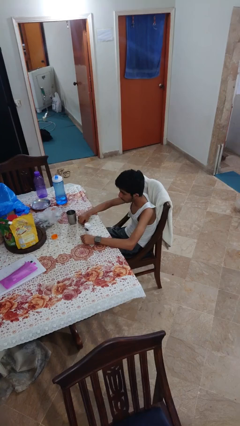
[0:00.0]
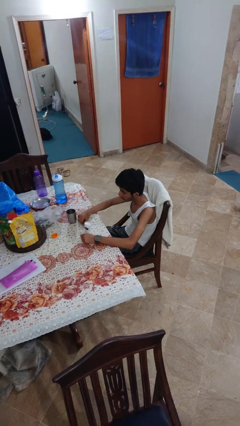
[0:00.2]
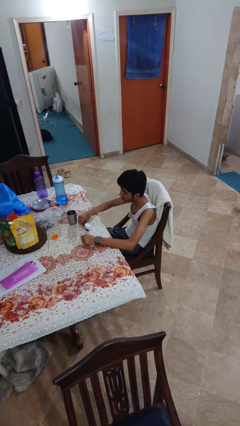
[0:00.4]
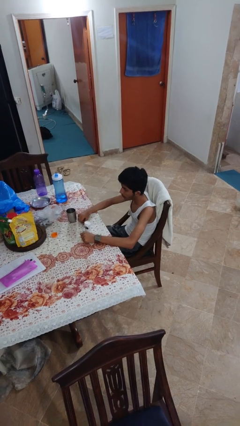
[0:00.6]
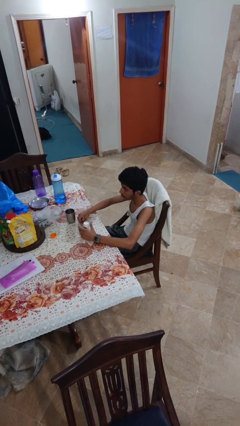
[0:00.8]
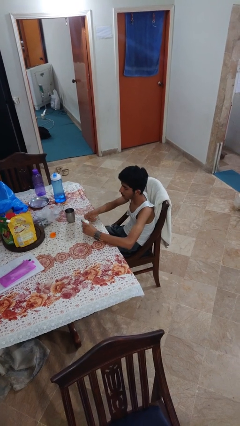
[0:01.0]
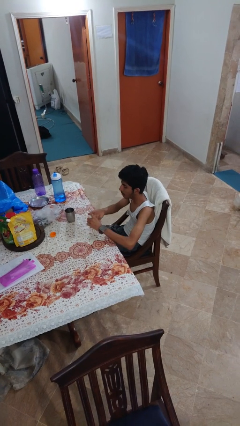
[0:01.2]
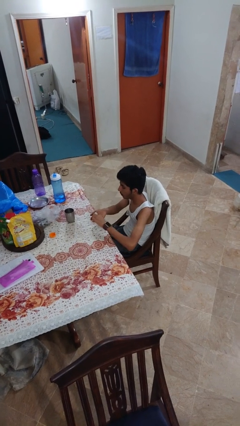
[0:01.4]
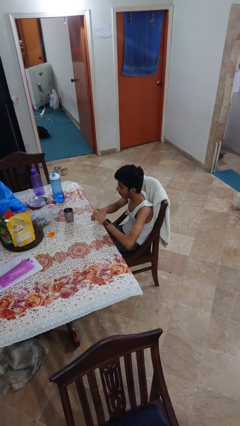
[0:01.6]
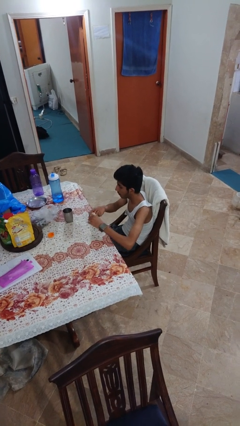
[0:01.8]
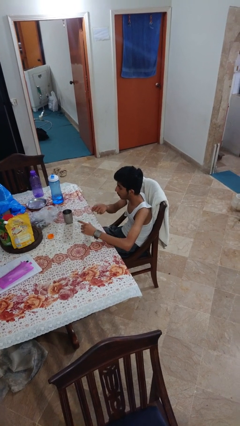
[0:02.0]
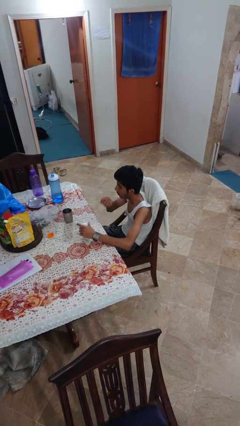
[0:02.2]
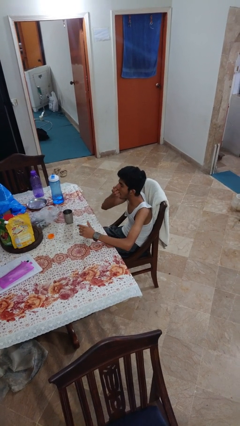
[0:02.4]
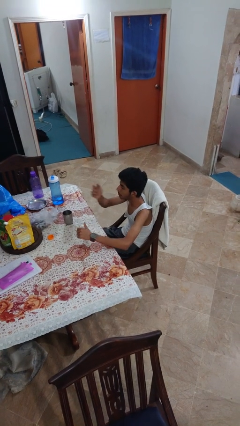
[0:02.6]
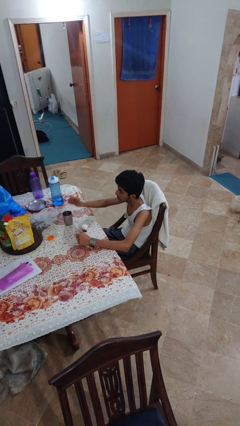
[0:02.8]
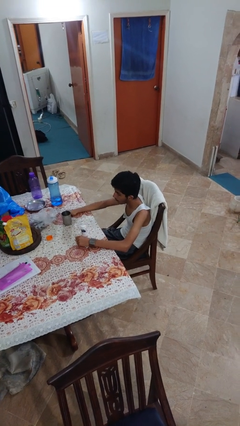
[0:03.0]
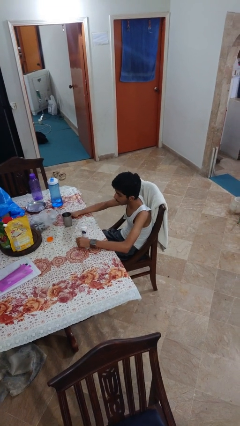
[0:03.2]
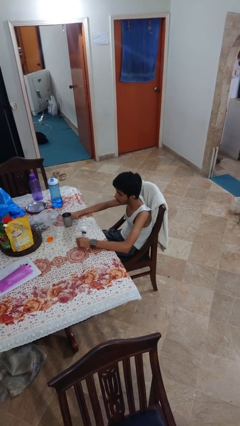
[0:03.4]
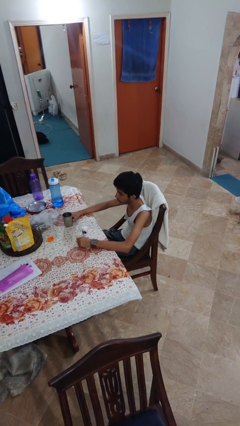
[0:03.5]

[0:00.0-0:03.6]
person takes medicine pills

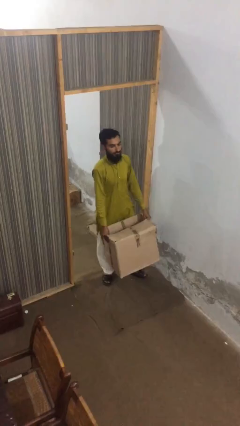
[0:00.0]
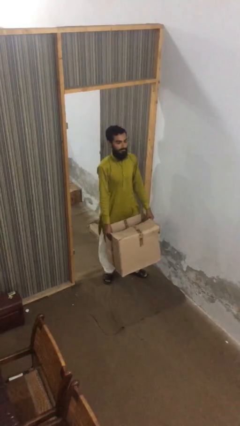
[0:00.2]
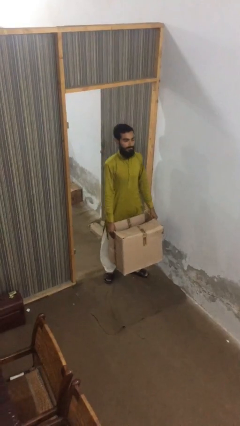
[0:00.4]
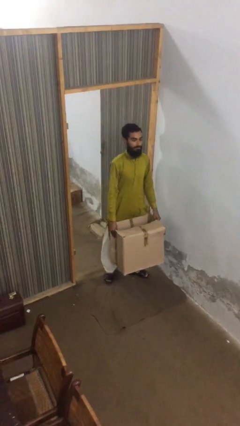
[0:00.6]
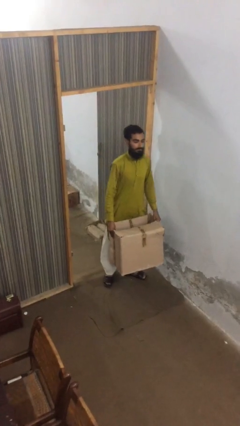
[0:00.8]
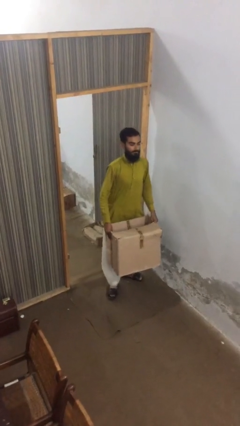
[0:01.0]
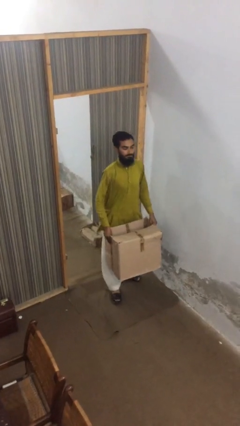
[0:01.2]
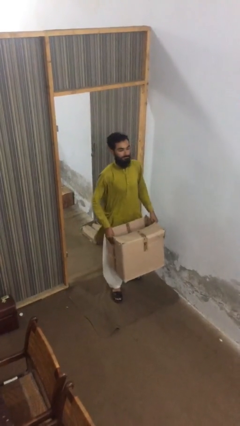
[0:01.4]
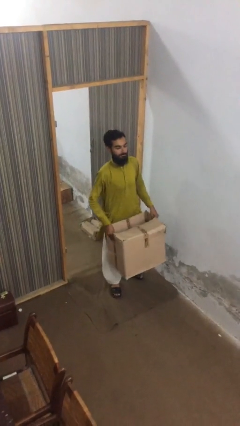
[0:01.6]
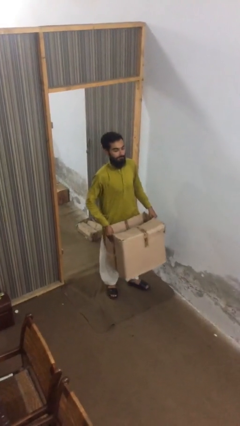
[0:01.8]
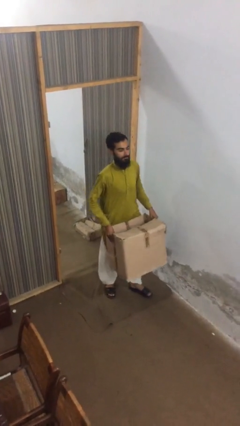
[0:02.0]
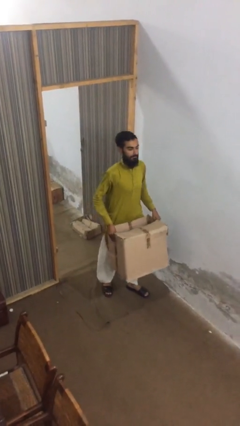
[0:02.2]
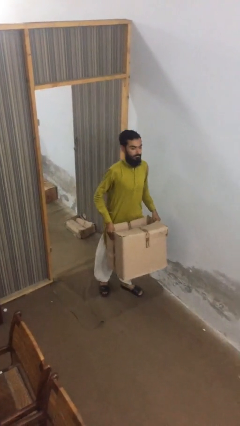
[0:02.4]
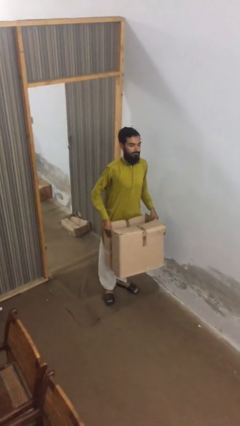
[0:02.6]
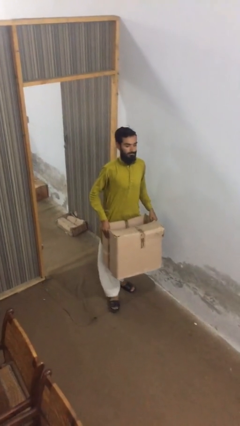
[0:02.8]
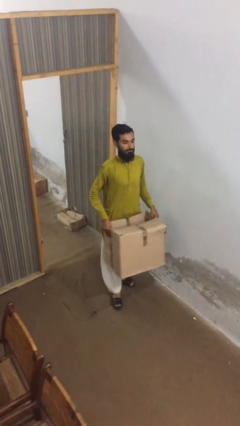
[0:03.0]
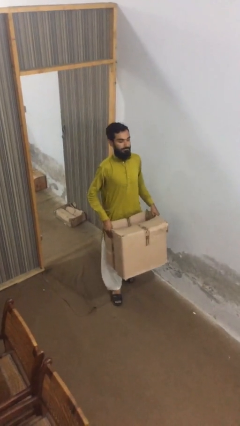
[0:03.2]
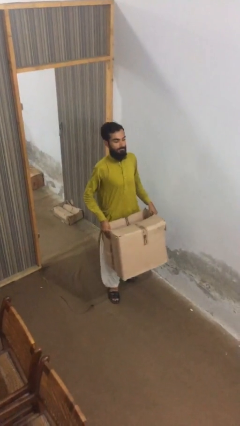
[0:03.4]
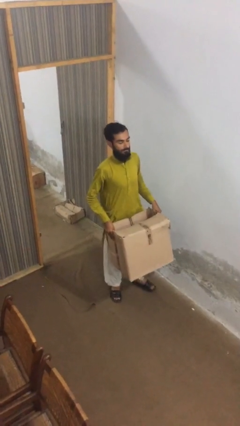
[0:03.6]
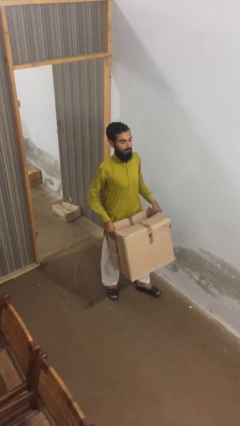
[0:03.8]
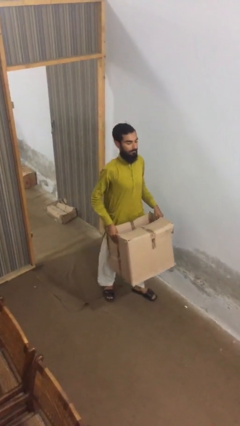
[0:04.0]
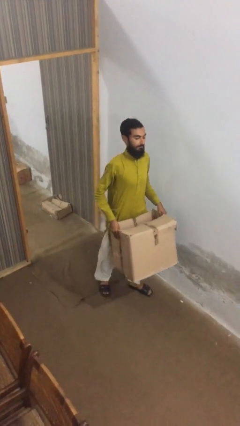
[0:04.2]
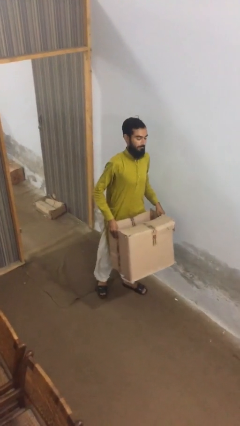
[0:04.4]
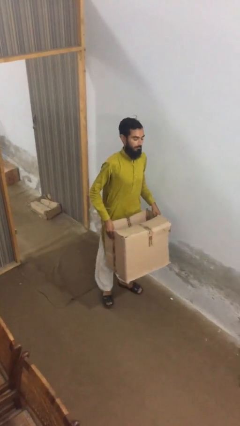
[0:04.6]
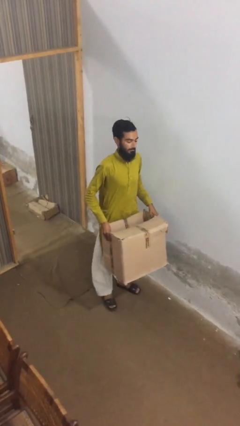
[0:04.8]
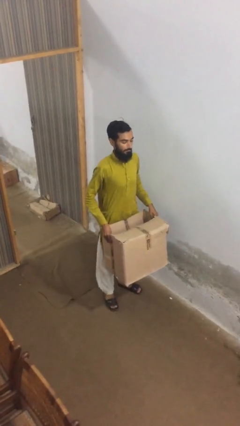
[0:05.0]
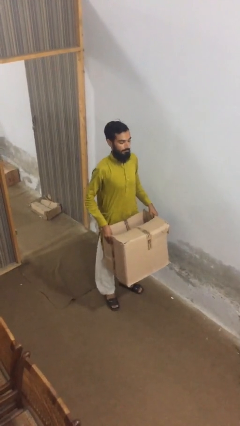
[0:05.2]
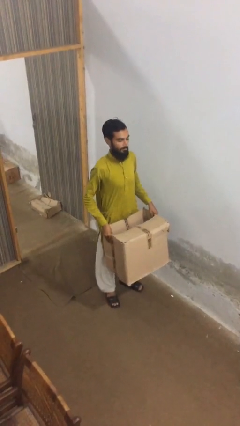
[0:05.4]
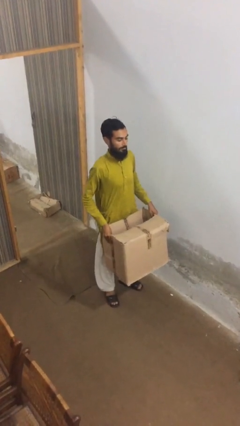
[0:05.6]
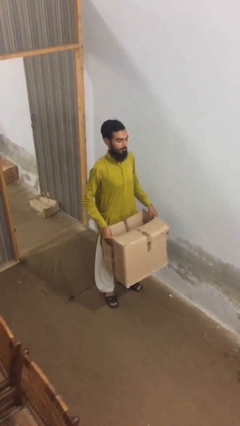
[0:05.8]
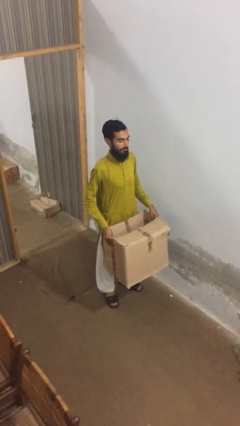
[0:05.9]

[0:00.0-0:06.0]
person carries heavy object

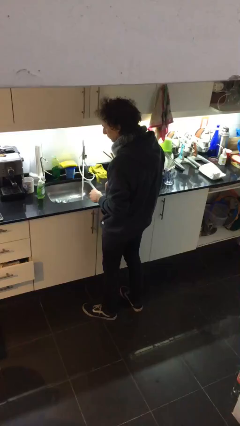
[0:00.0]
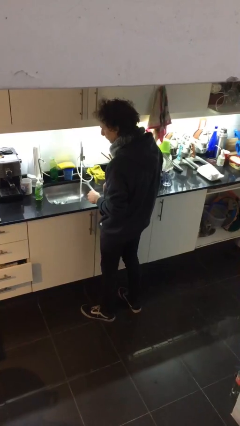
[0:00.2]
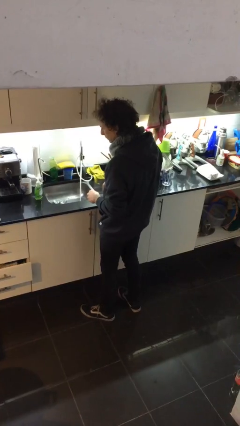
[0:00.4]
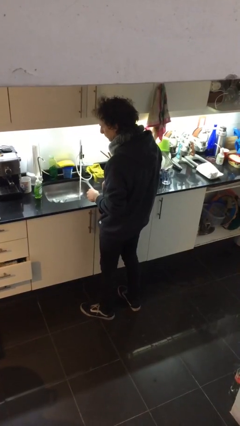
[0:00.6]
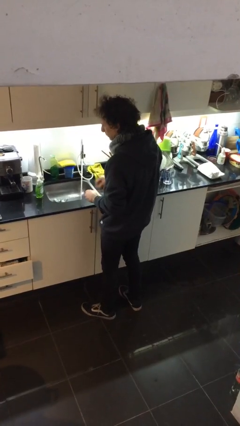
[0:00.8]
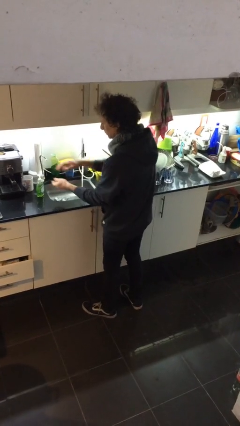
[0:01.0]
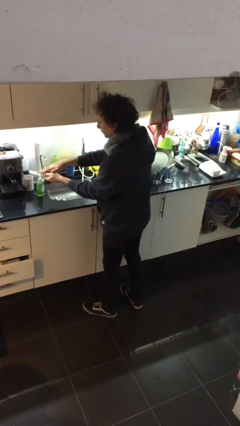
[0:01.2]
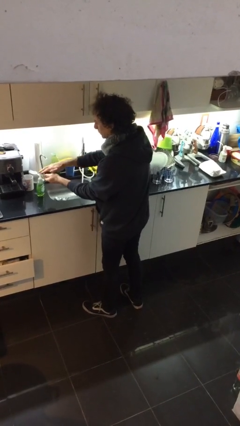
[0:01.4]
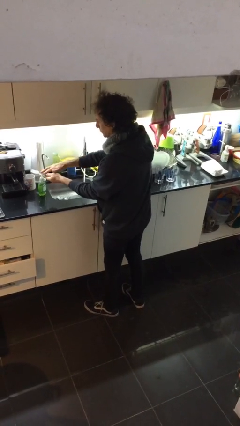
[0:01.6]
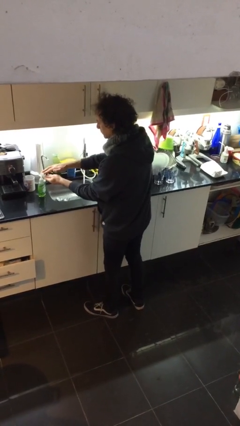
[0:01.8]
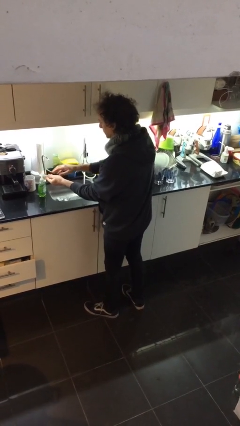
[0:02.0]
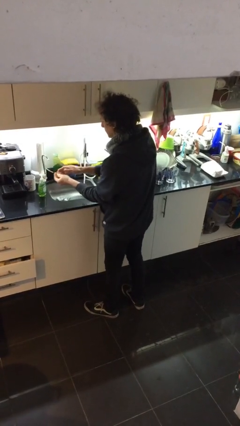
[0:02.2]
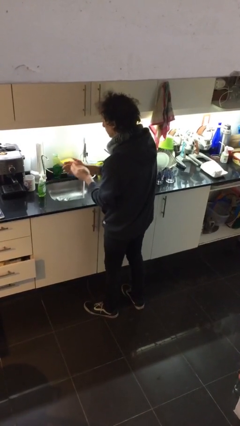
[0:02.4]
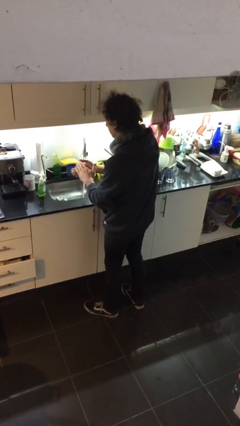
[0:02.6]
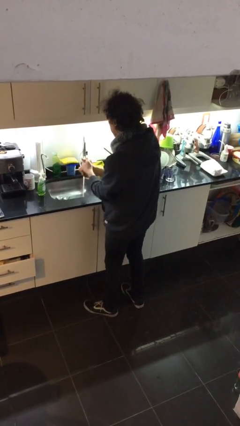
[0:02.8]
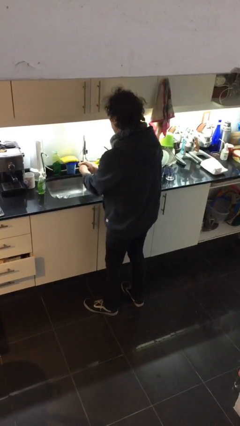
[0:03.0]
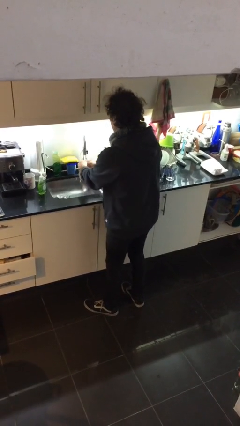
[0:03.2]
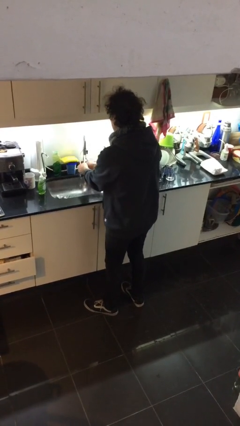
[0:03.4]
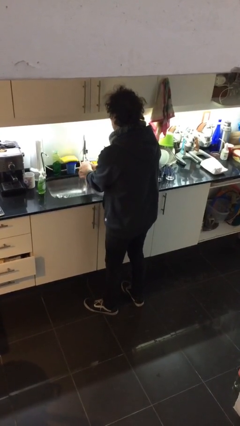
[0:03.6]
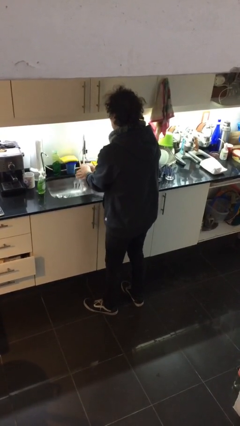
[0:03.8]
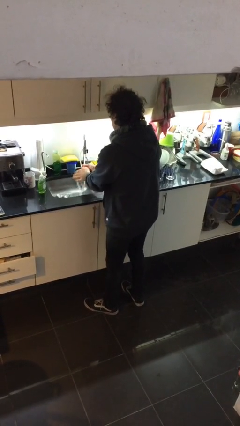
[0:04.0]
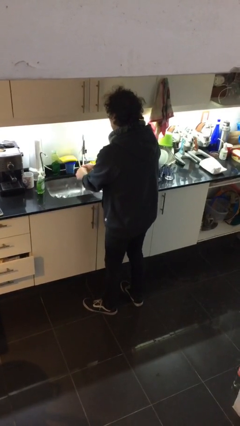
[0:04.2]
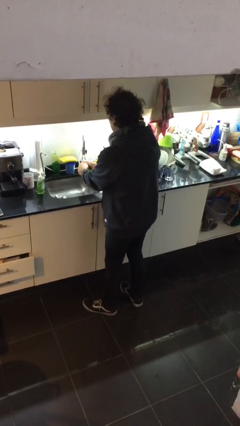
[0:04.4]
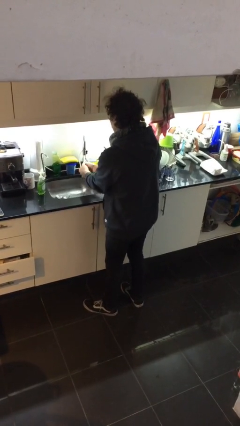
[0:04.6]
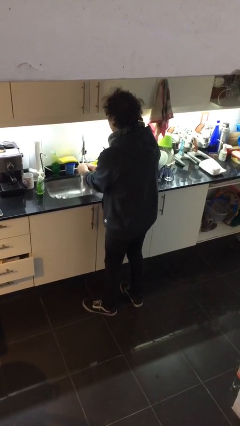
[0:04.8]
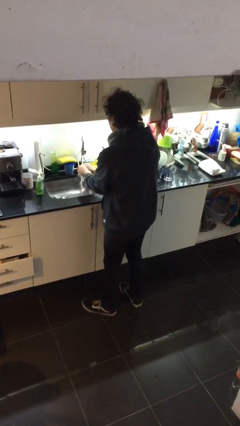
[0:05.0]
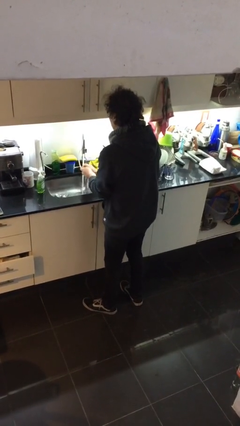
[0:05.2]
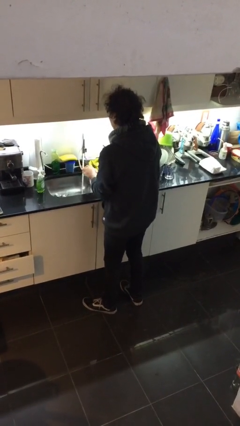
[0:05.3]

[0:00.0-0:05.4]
person washes hands

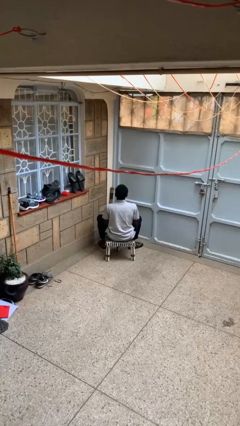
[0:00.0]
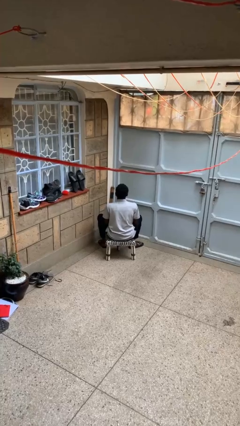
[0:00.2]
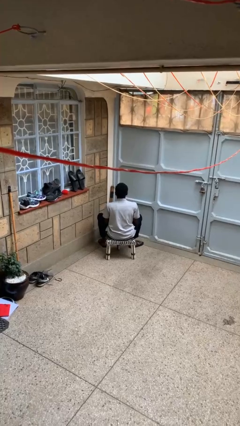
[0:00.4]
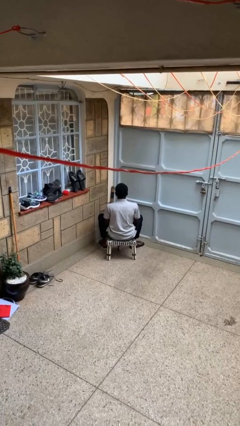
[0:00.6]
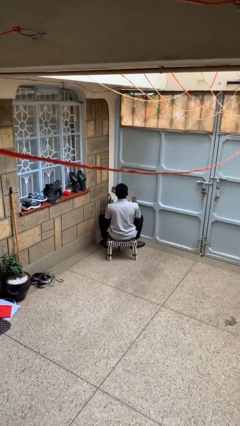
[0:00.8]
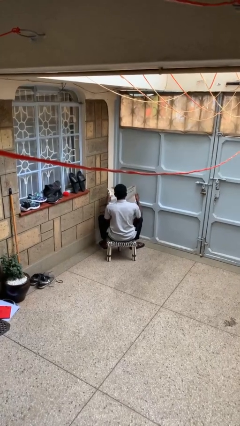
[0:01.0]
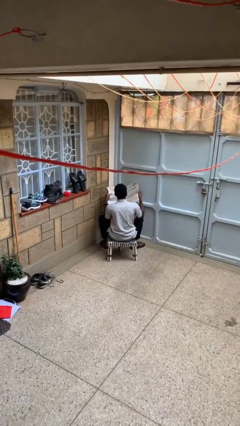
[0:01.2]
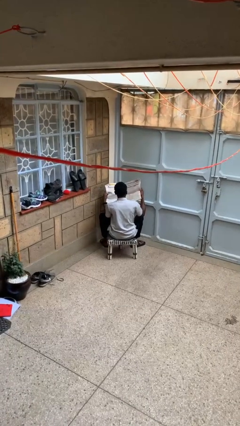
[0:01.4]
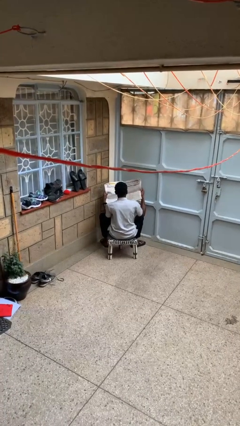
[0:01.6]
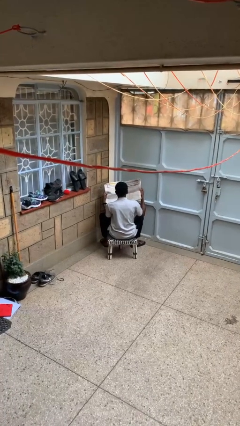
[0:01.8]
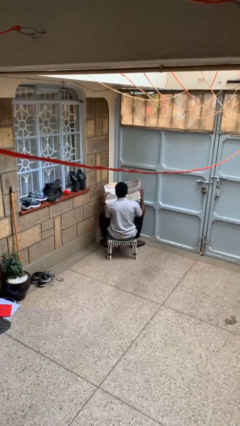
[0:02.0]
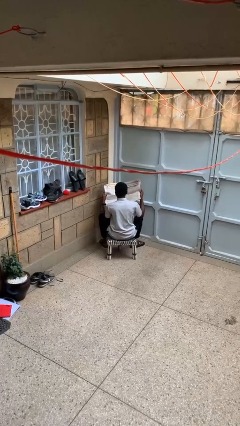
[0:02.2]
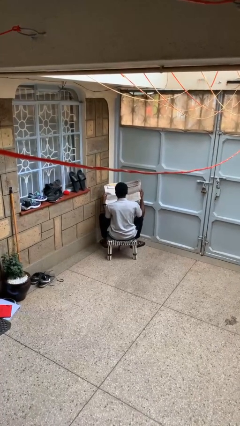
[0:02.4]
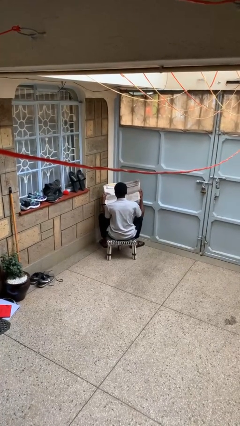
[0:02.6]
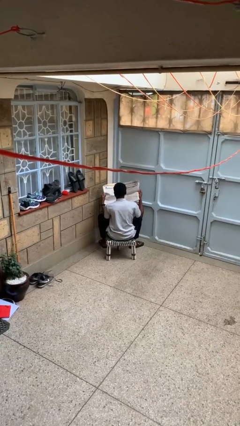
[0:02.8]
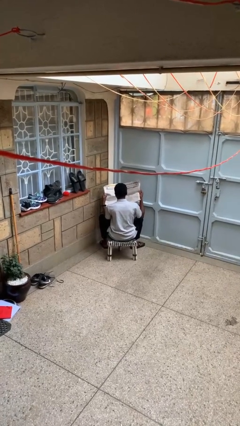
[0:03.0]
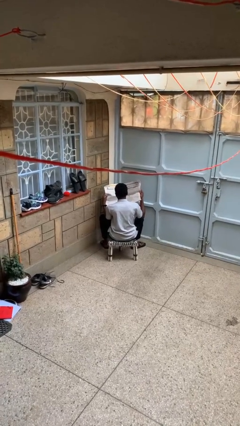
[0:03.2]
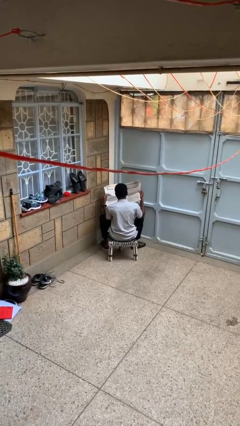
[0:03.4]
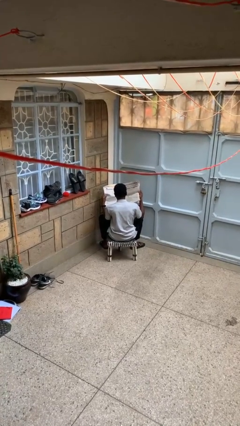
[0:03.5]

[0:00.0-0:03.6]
person reads newspaper
